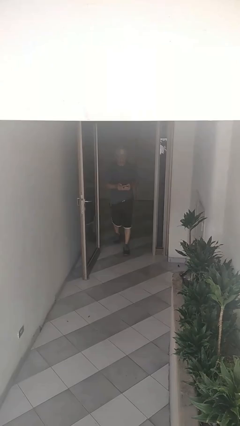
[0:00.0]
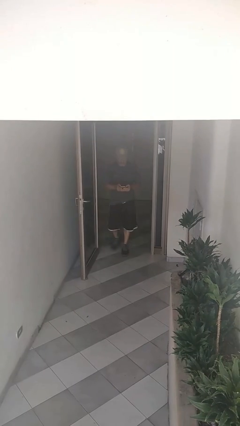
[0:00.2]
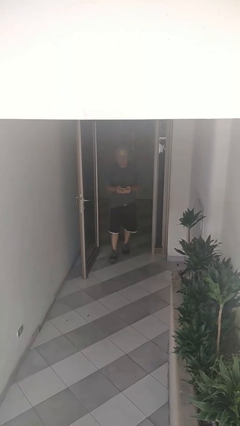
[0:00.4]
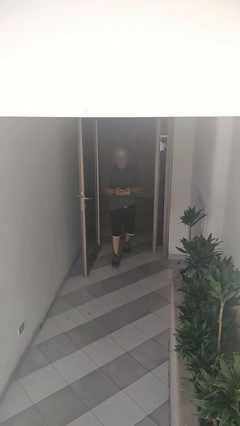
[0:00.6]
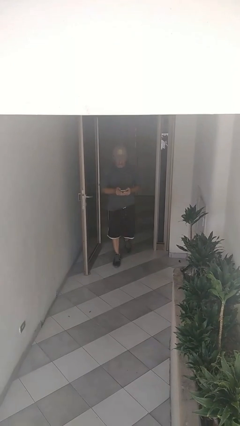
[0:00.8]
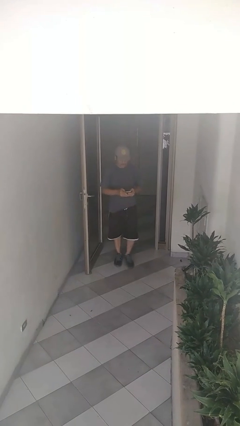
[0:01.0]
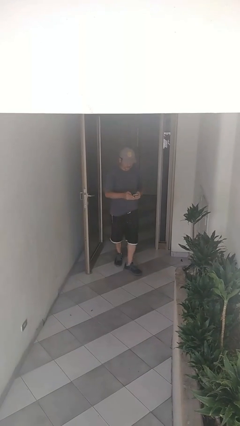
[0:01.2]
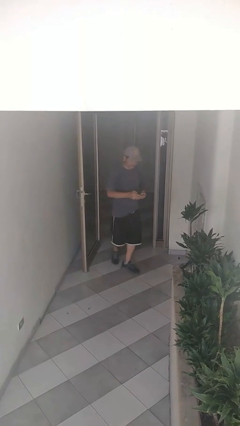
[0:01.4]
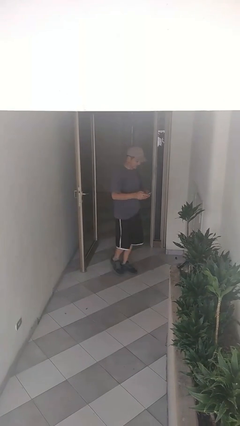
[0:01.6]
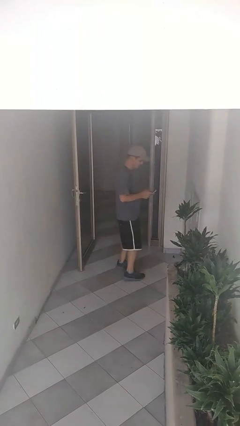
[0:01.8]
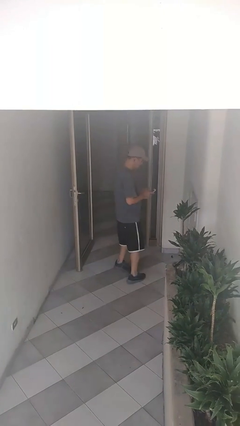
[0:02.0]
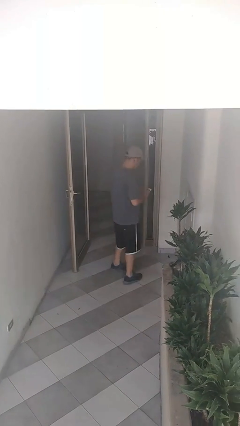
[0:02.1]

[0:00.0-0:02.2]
person enters scene through structure

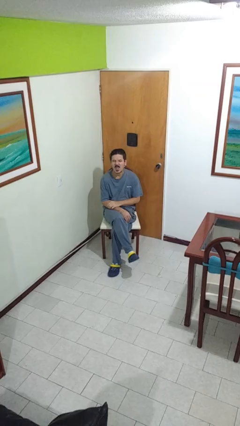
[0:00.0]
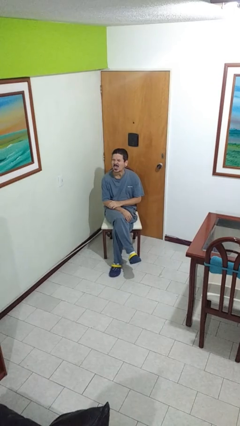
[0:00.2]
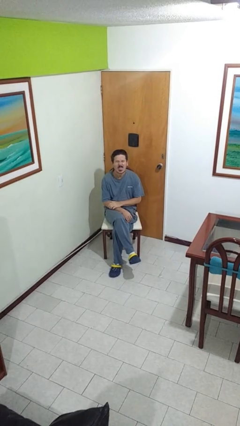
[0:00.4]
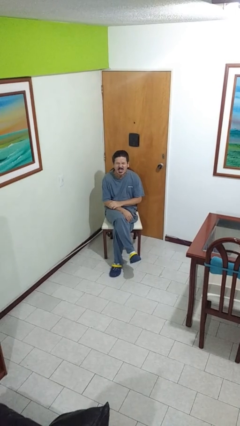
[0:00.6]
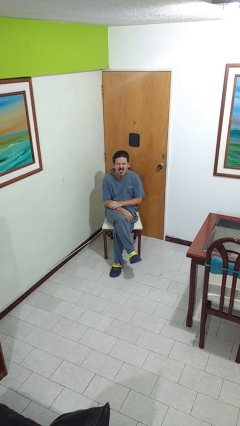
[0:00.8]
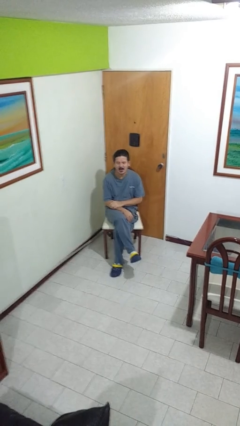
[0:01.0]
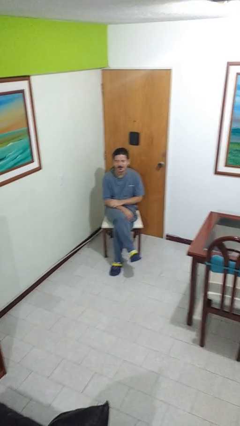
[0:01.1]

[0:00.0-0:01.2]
person sticks out tongue

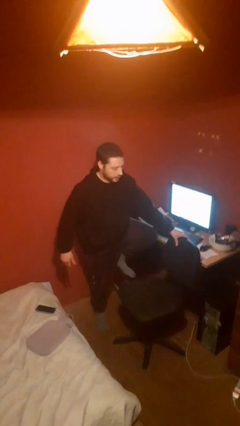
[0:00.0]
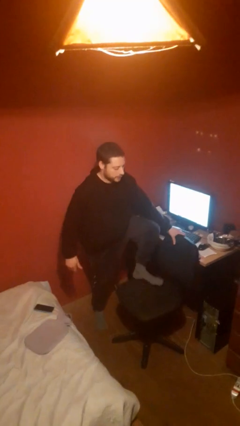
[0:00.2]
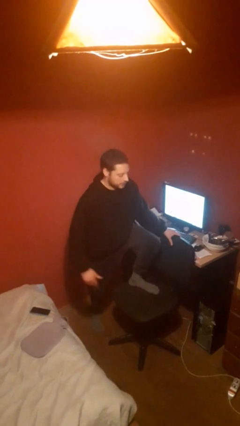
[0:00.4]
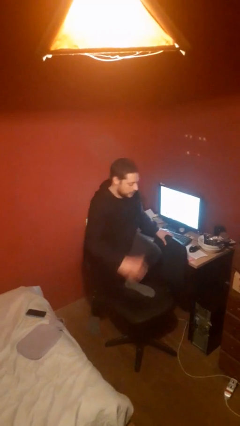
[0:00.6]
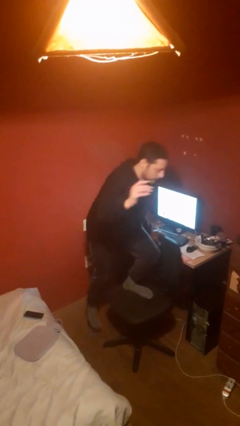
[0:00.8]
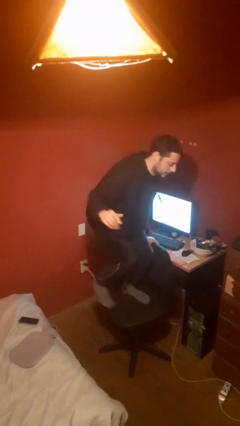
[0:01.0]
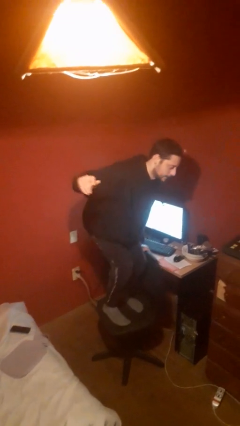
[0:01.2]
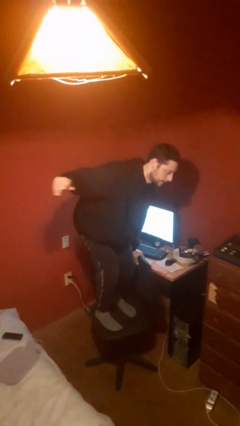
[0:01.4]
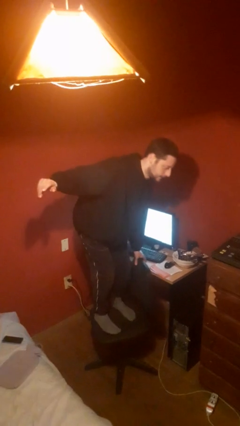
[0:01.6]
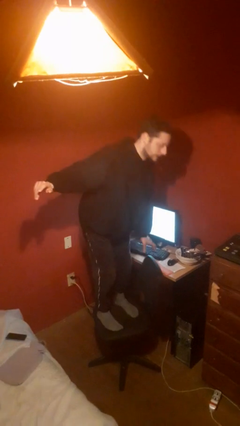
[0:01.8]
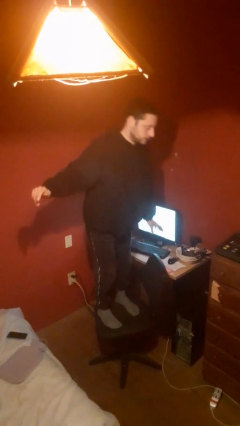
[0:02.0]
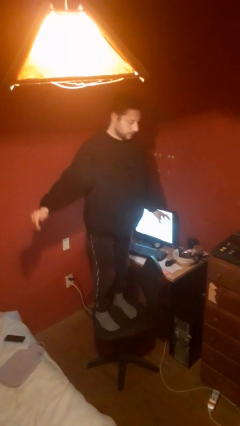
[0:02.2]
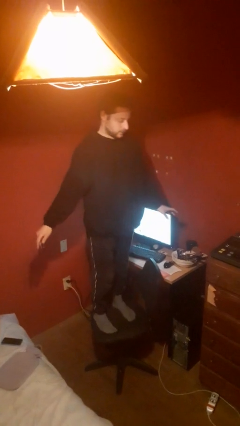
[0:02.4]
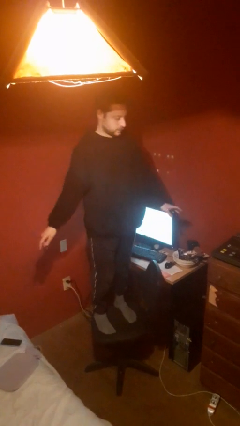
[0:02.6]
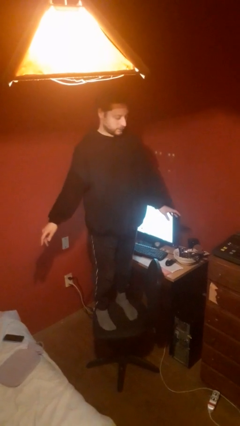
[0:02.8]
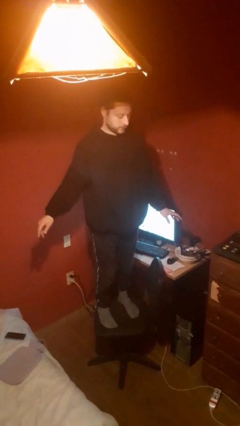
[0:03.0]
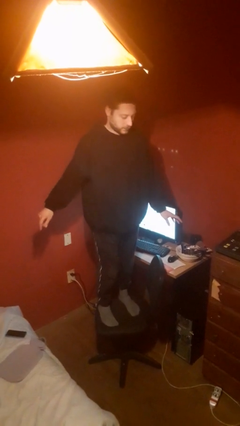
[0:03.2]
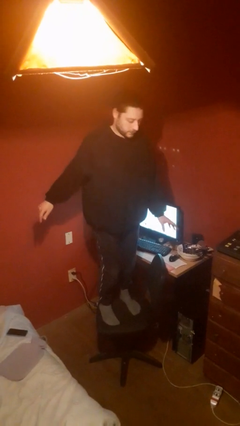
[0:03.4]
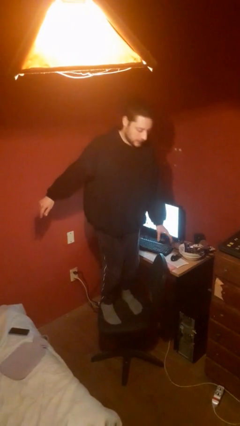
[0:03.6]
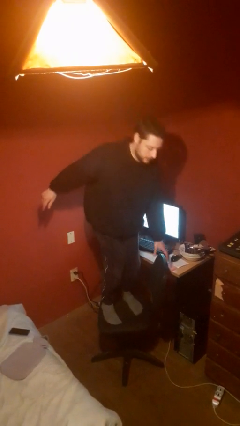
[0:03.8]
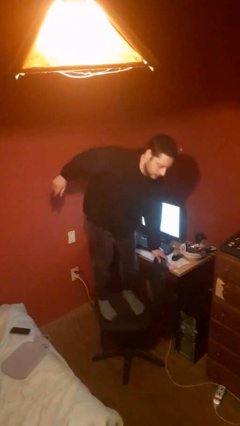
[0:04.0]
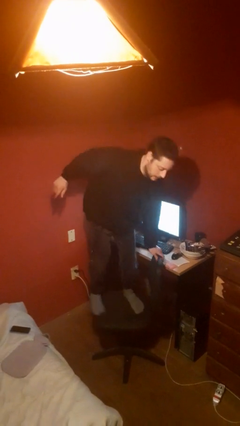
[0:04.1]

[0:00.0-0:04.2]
person climbs on chair

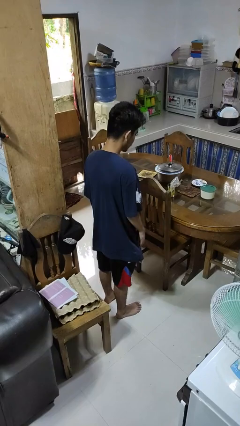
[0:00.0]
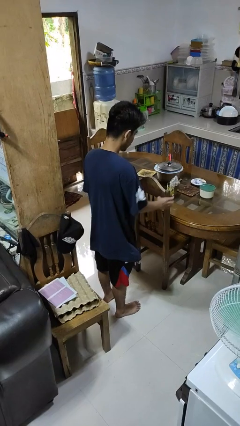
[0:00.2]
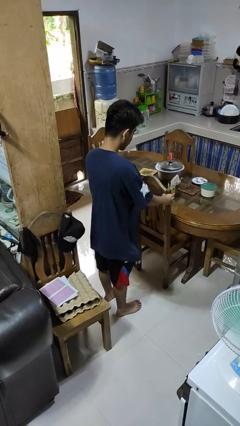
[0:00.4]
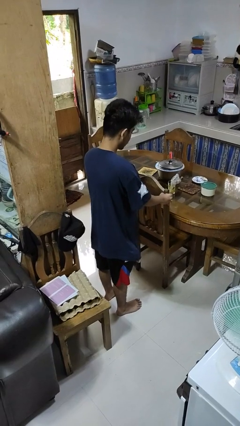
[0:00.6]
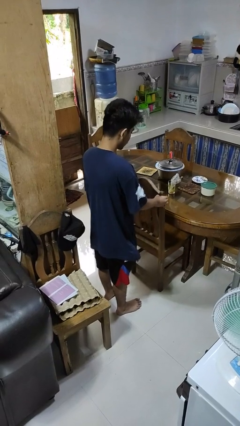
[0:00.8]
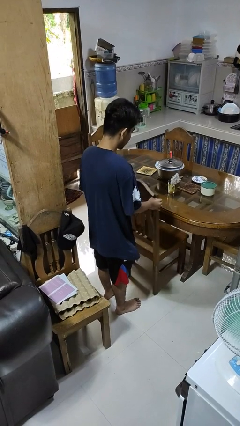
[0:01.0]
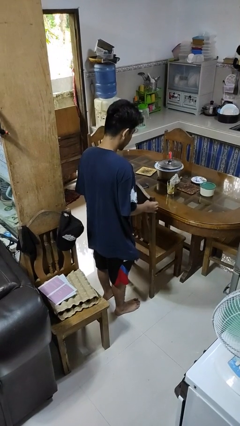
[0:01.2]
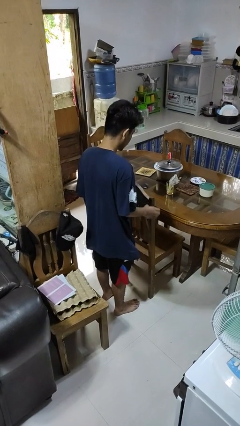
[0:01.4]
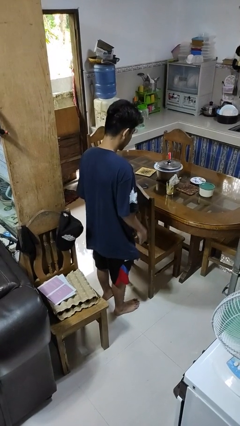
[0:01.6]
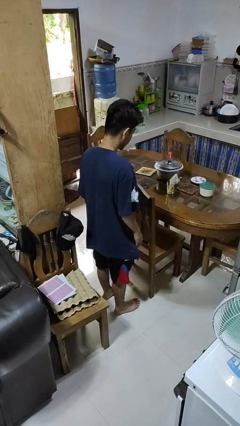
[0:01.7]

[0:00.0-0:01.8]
person pulls out chair

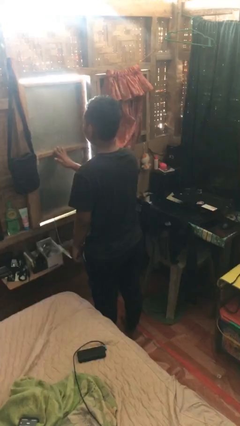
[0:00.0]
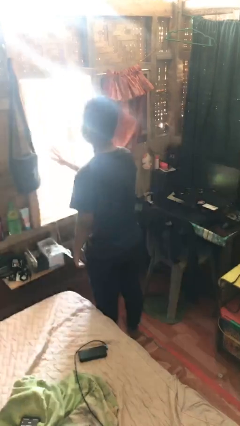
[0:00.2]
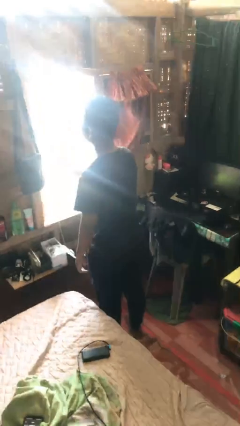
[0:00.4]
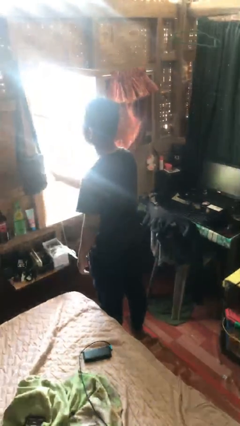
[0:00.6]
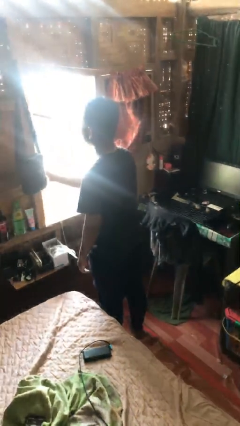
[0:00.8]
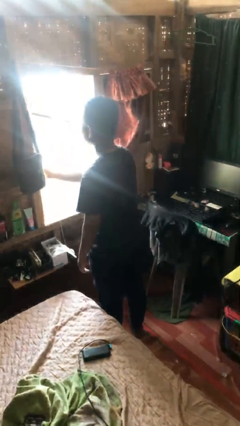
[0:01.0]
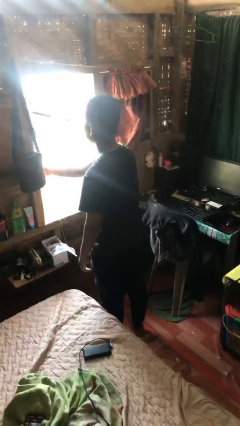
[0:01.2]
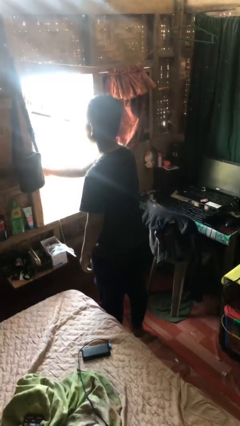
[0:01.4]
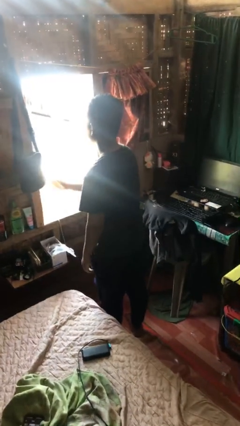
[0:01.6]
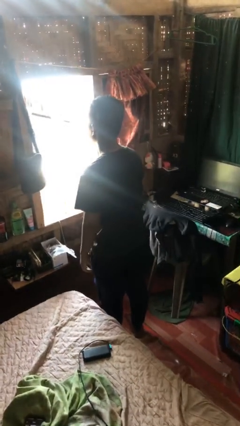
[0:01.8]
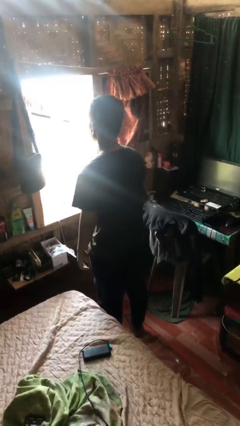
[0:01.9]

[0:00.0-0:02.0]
person opens home window

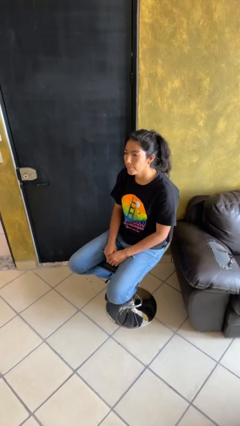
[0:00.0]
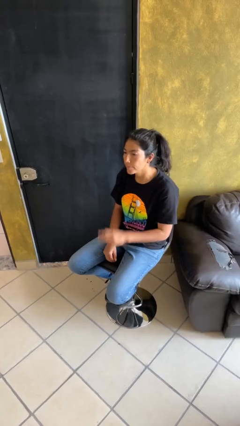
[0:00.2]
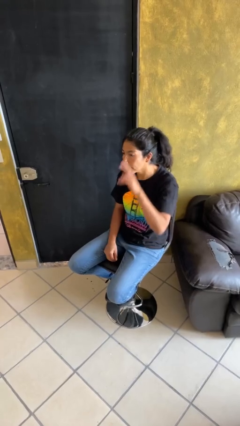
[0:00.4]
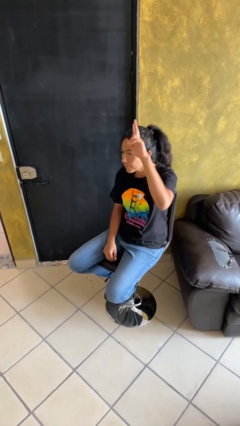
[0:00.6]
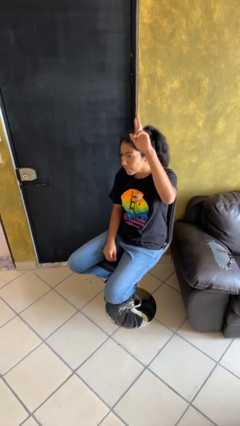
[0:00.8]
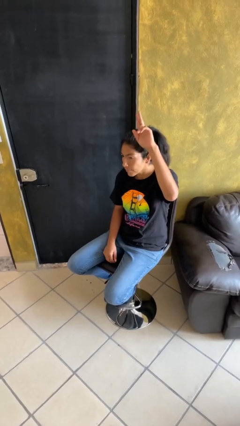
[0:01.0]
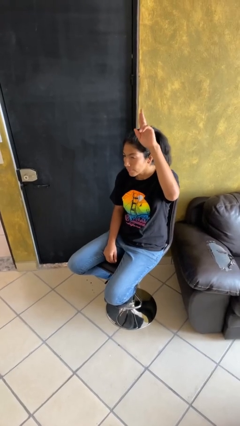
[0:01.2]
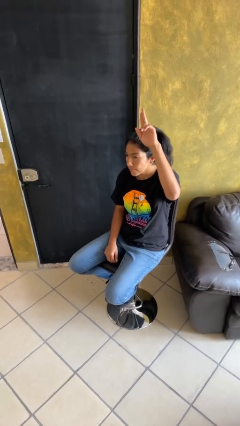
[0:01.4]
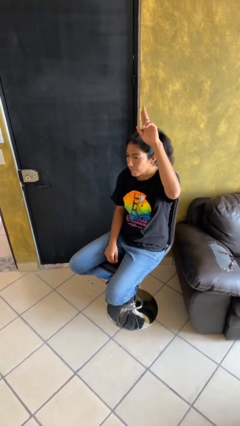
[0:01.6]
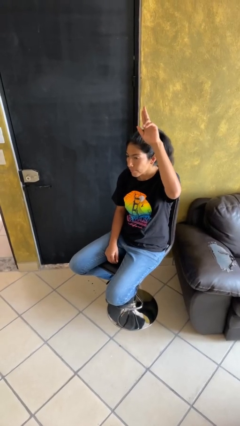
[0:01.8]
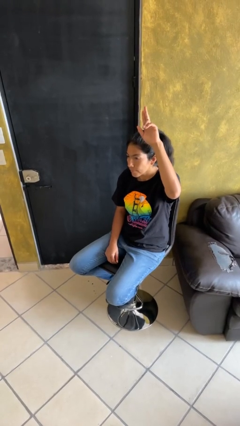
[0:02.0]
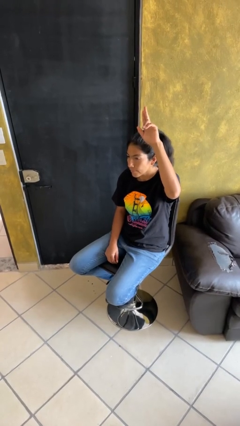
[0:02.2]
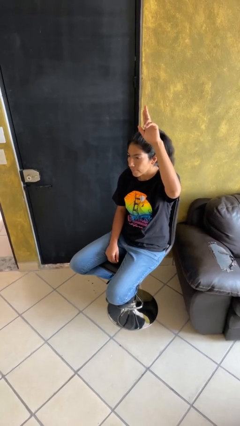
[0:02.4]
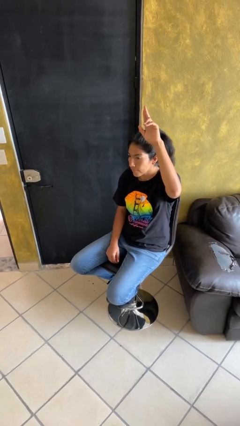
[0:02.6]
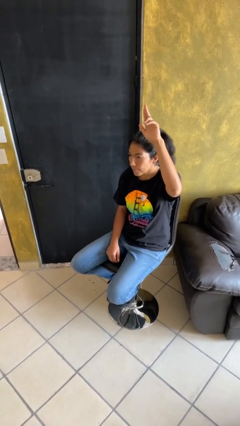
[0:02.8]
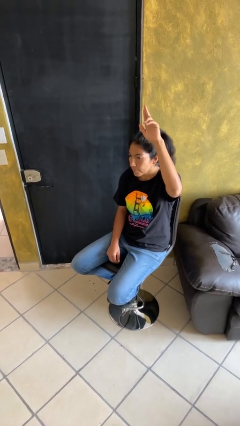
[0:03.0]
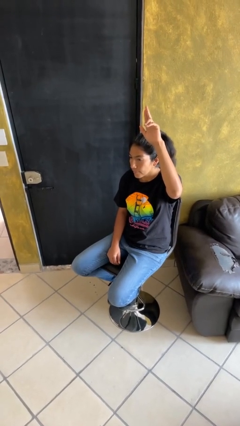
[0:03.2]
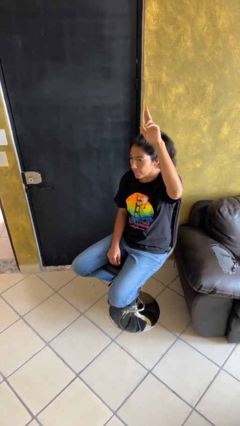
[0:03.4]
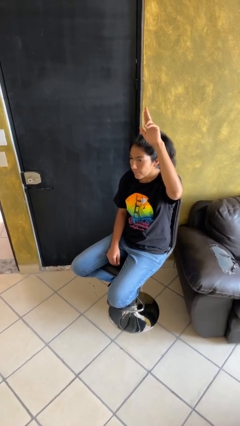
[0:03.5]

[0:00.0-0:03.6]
person gestures raise hand

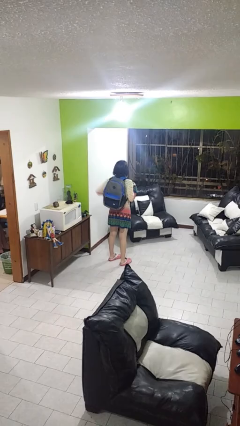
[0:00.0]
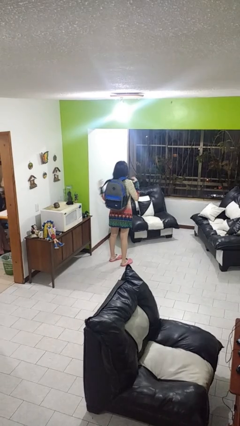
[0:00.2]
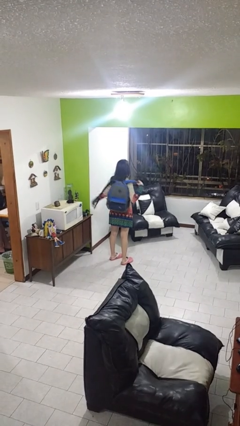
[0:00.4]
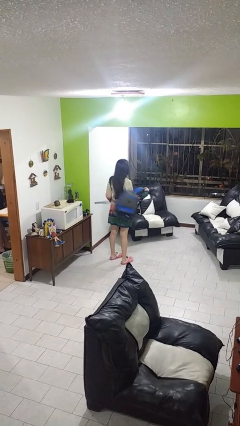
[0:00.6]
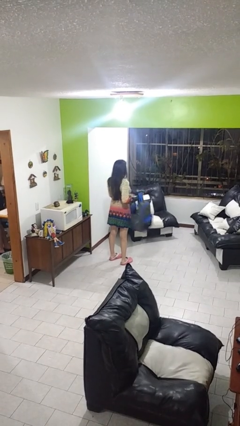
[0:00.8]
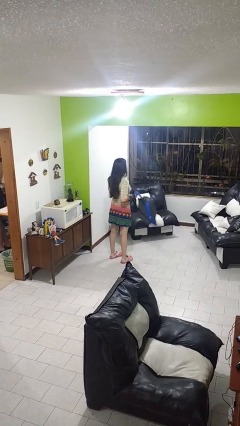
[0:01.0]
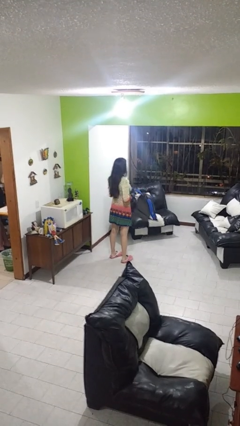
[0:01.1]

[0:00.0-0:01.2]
person takes off backpack

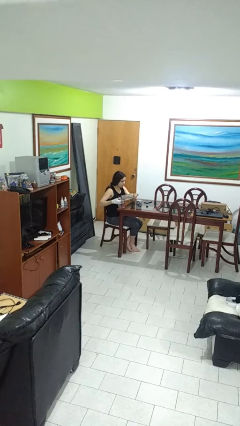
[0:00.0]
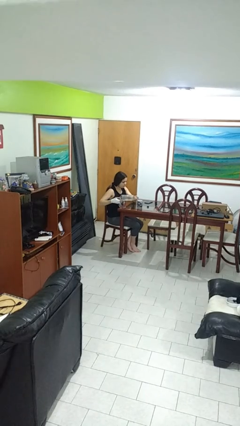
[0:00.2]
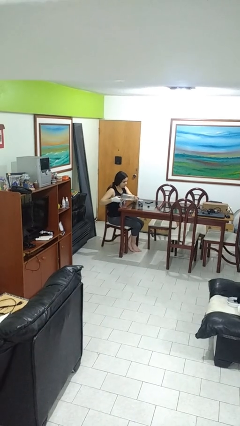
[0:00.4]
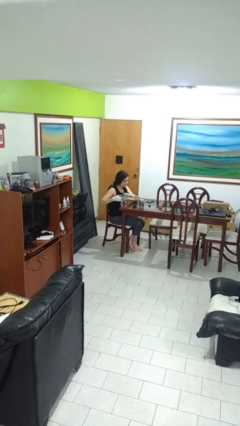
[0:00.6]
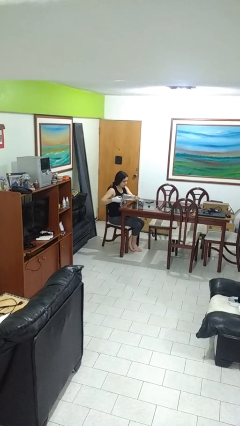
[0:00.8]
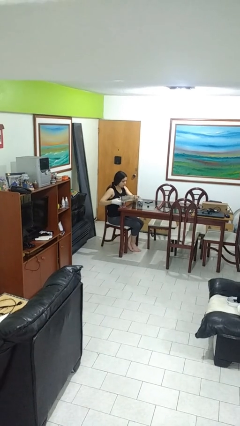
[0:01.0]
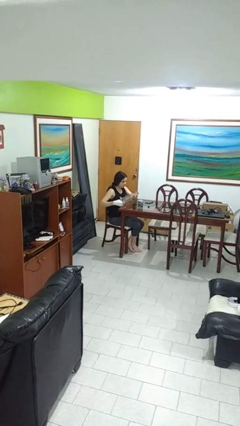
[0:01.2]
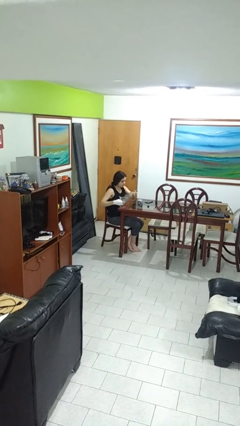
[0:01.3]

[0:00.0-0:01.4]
person pours liquid into cup
